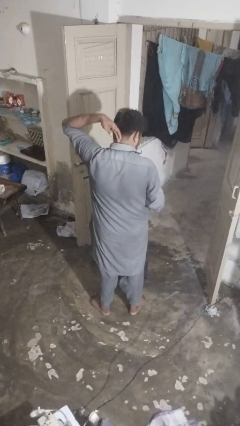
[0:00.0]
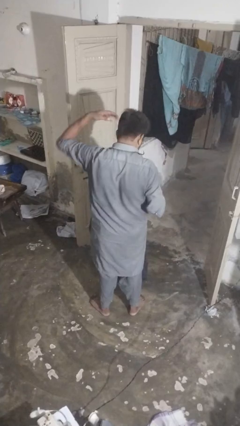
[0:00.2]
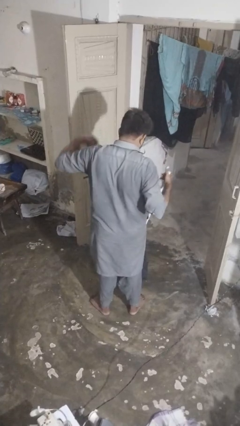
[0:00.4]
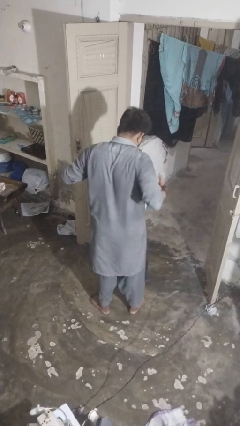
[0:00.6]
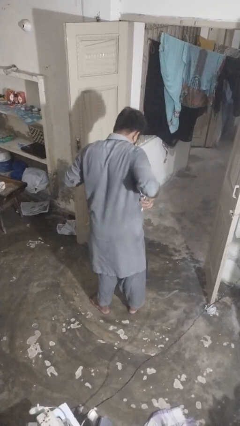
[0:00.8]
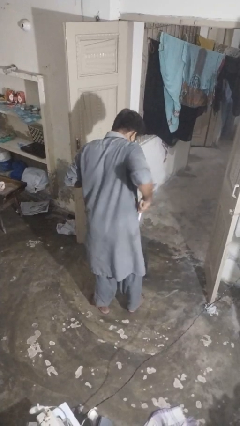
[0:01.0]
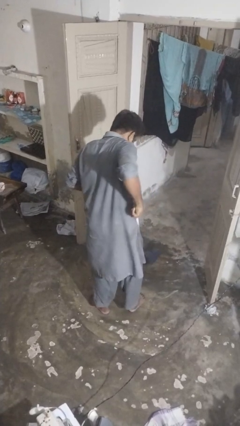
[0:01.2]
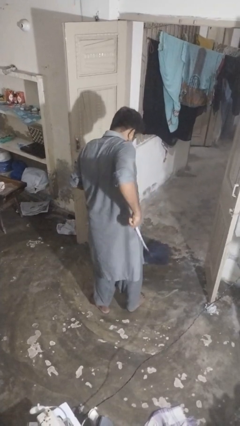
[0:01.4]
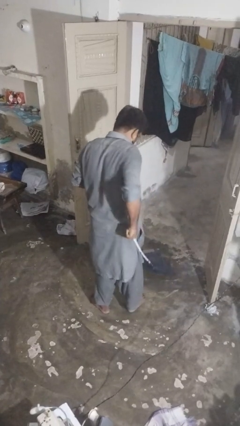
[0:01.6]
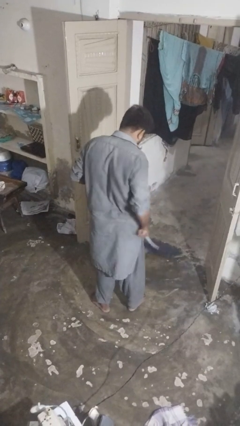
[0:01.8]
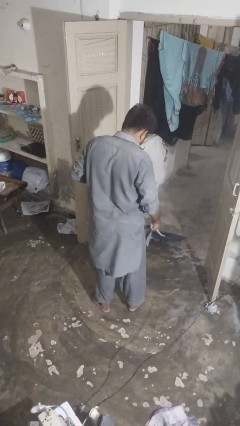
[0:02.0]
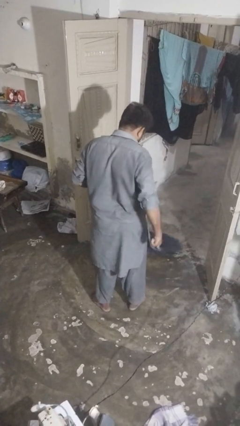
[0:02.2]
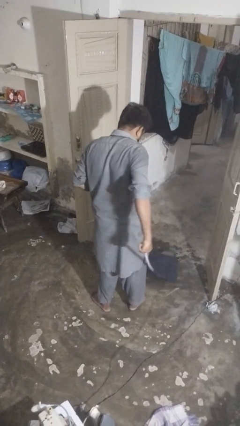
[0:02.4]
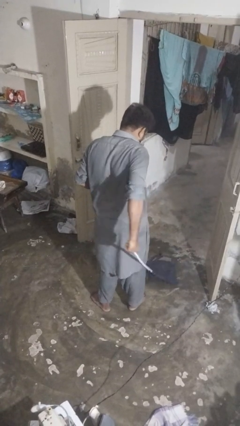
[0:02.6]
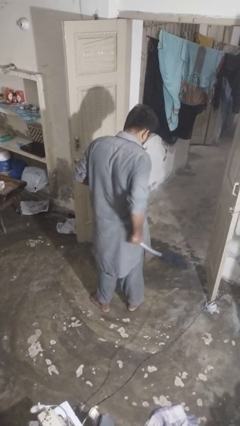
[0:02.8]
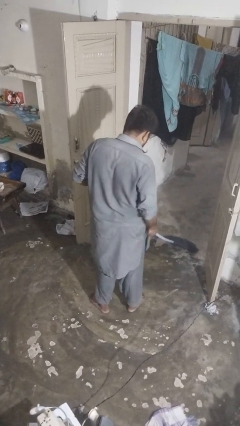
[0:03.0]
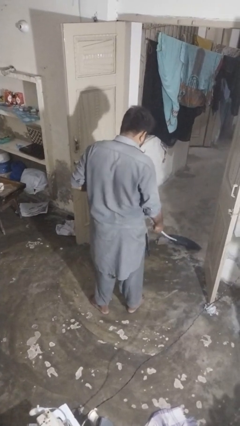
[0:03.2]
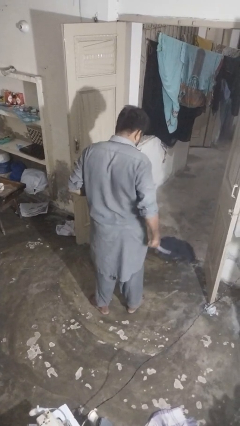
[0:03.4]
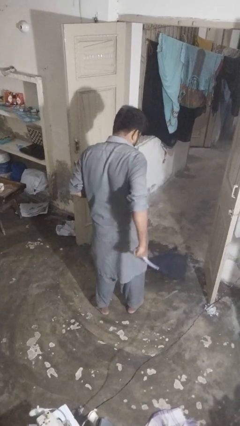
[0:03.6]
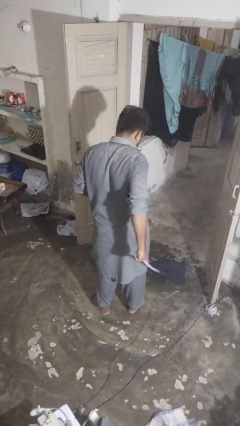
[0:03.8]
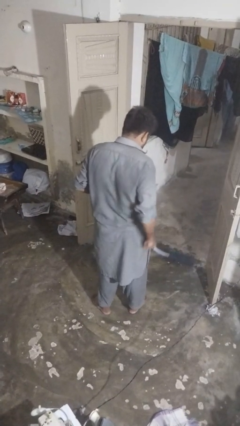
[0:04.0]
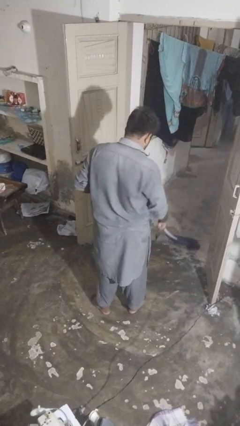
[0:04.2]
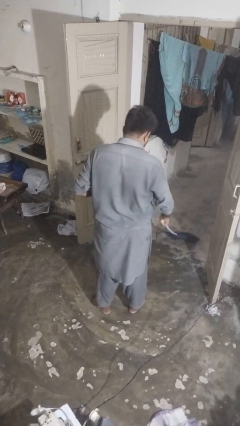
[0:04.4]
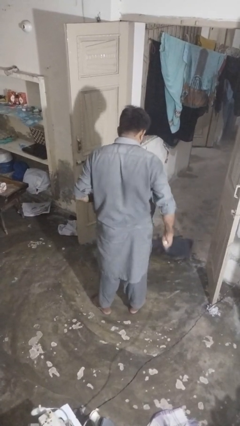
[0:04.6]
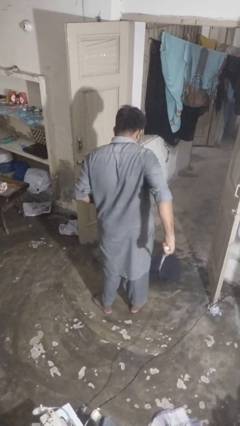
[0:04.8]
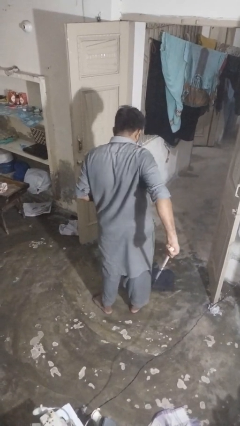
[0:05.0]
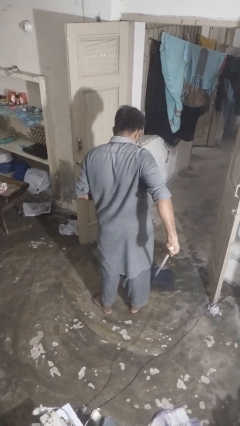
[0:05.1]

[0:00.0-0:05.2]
person mops

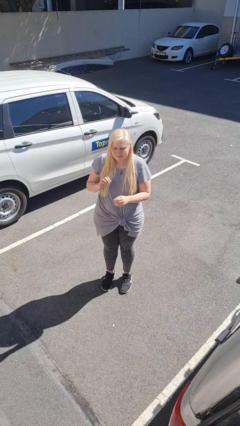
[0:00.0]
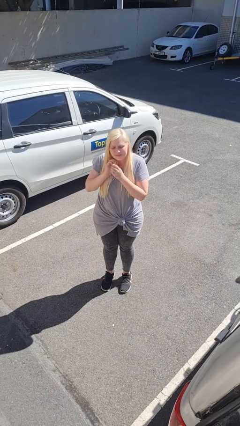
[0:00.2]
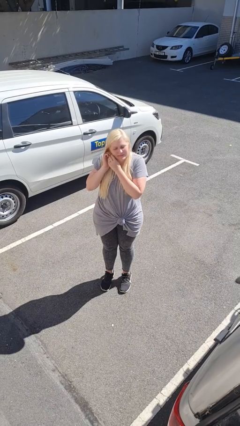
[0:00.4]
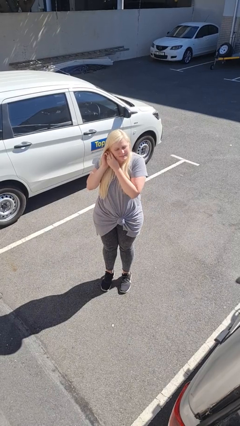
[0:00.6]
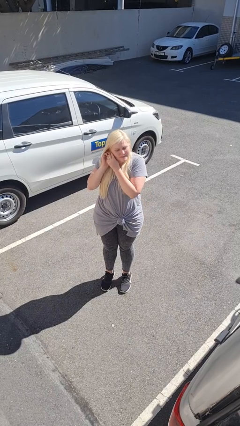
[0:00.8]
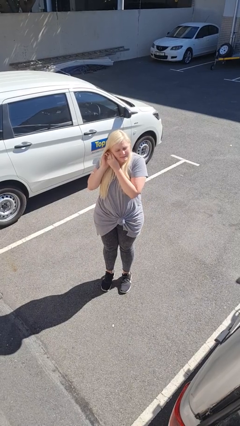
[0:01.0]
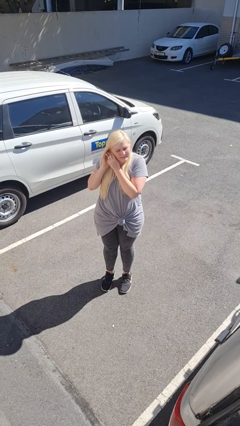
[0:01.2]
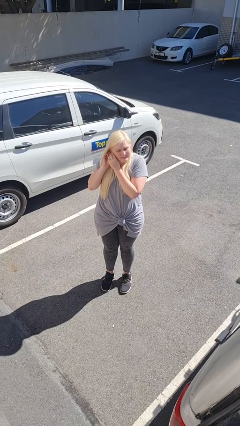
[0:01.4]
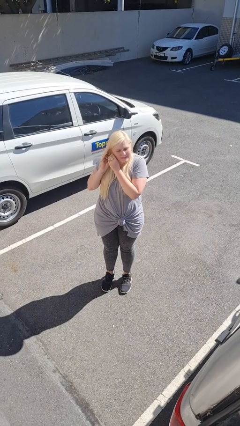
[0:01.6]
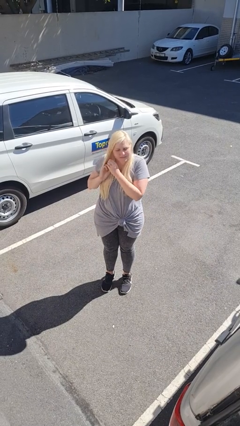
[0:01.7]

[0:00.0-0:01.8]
person takes off earrings

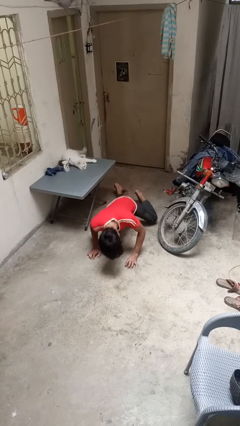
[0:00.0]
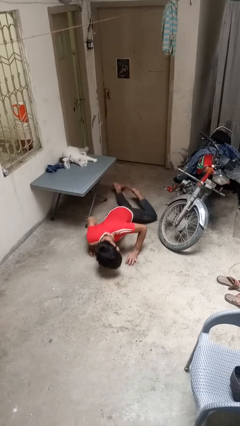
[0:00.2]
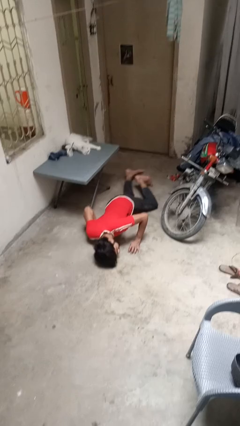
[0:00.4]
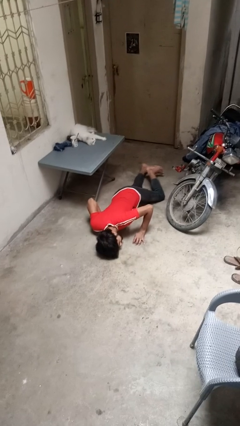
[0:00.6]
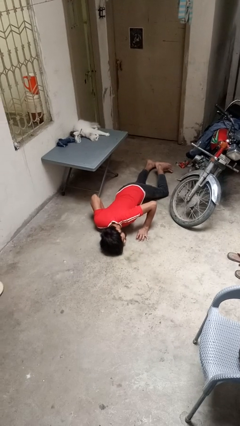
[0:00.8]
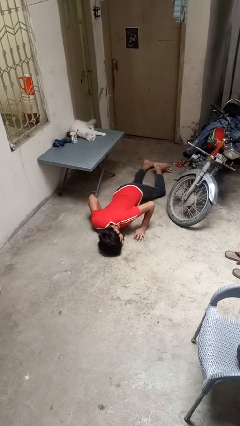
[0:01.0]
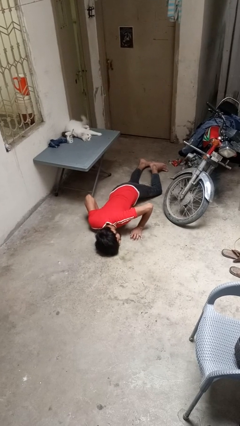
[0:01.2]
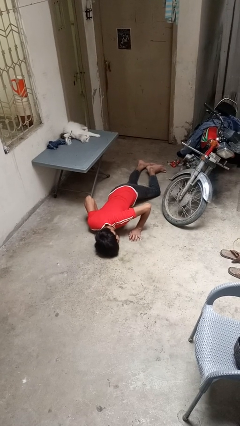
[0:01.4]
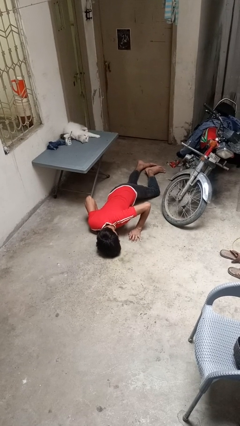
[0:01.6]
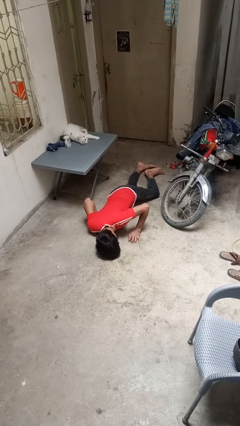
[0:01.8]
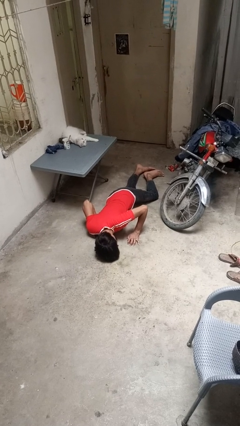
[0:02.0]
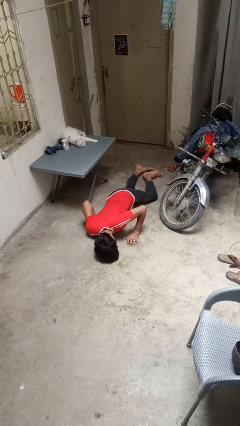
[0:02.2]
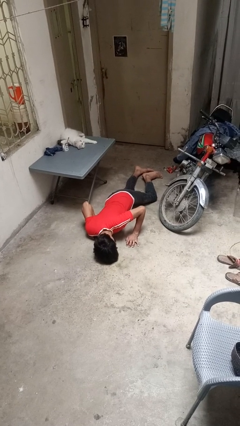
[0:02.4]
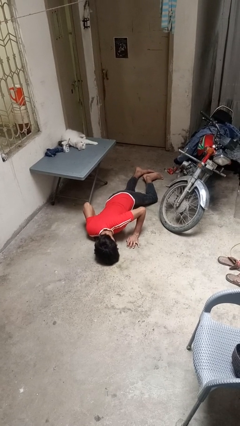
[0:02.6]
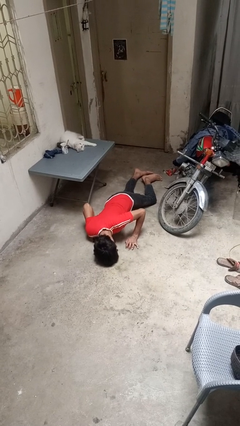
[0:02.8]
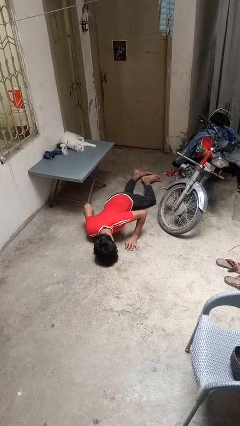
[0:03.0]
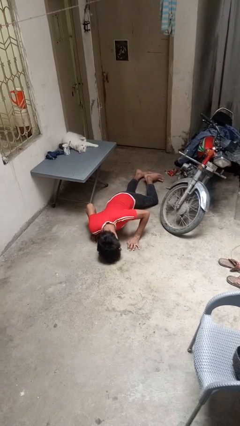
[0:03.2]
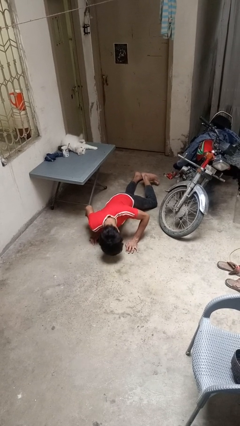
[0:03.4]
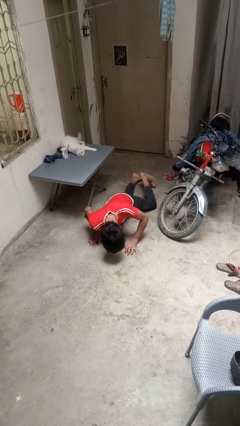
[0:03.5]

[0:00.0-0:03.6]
person lies down on floor

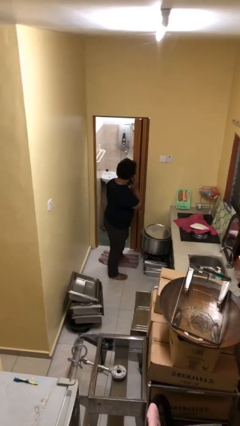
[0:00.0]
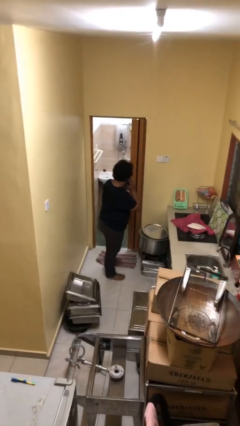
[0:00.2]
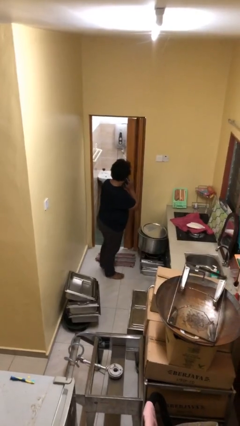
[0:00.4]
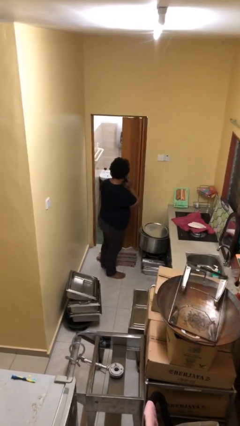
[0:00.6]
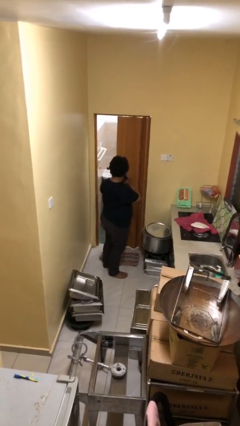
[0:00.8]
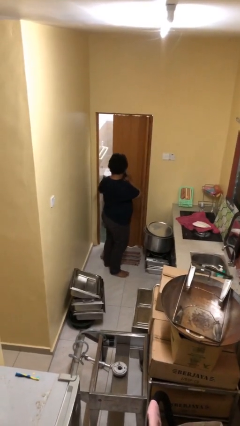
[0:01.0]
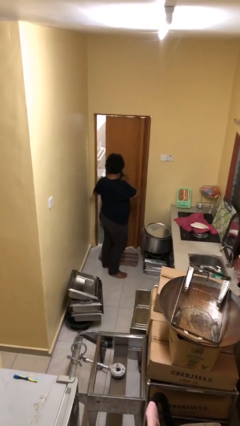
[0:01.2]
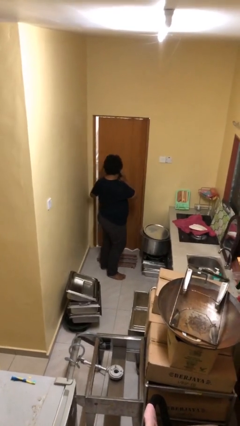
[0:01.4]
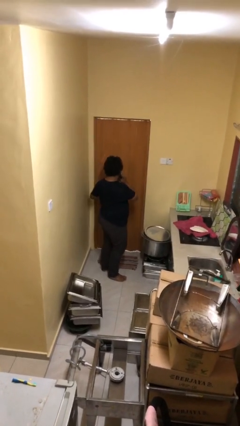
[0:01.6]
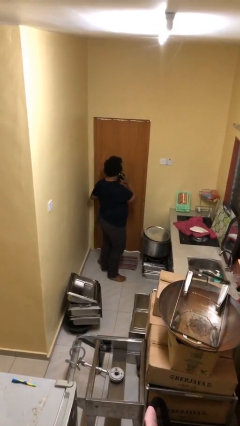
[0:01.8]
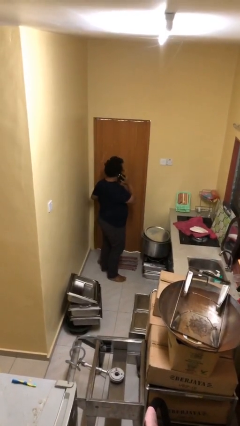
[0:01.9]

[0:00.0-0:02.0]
person closes facility door

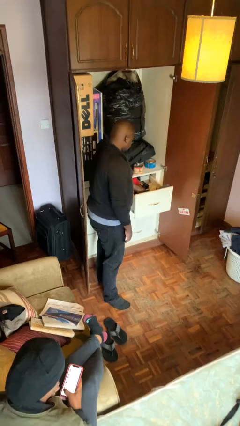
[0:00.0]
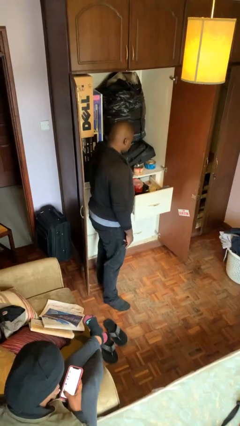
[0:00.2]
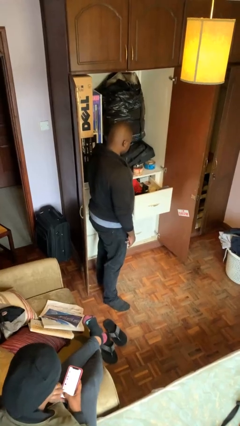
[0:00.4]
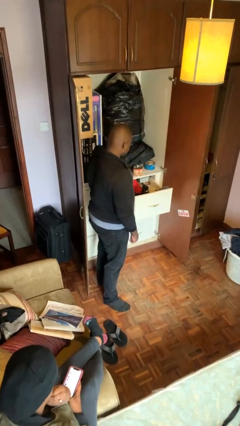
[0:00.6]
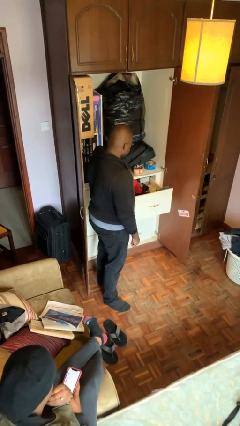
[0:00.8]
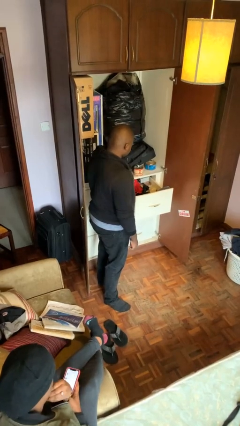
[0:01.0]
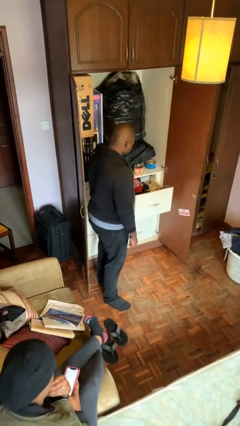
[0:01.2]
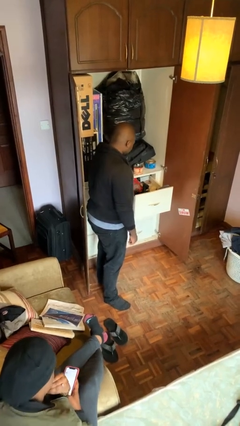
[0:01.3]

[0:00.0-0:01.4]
person puts clothes into dresser

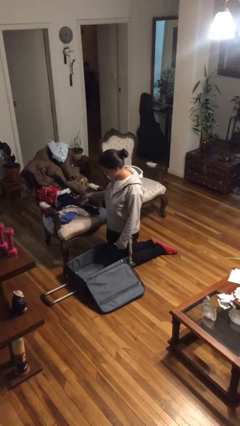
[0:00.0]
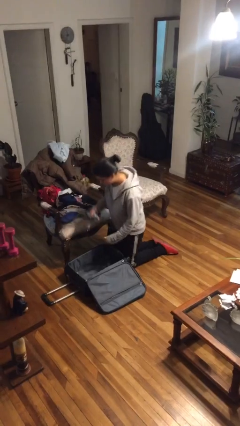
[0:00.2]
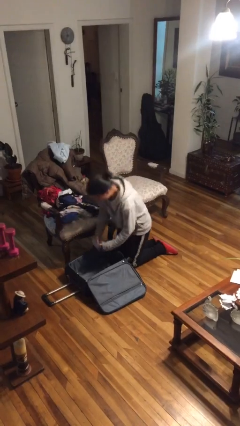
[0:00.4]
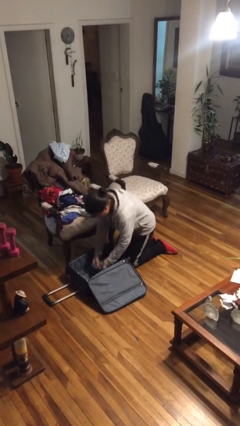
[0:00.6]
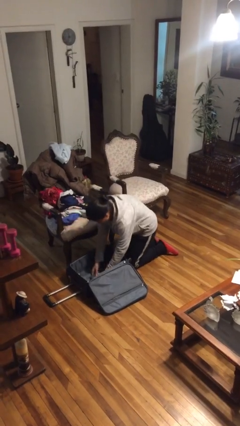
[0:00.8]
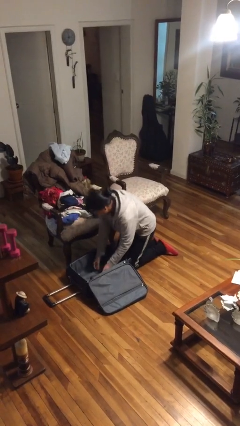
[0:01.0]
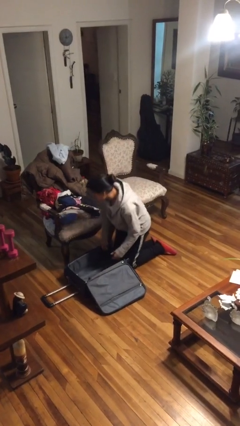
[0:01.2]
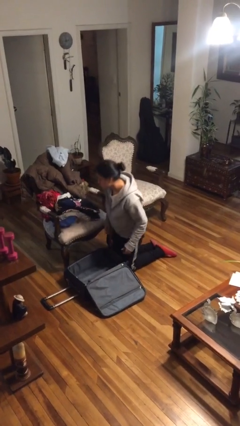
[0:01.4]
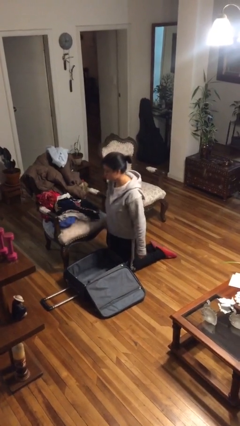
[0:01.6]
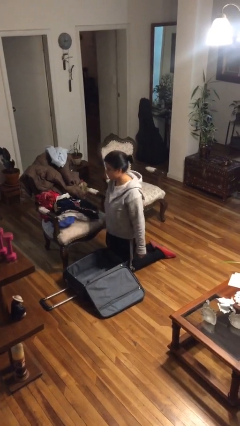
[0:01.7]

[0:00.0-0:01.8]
person loads clothes into suitcase

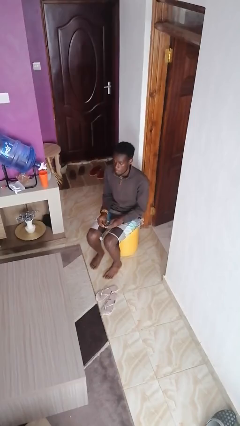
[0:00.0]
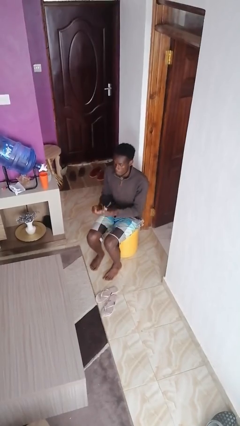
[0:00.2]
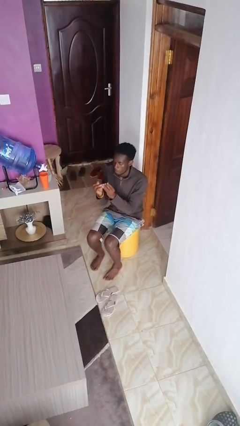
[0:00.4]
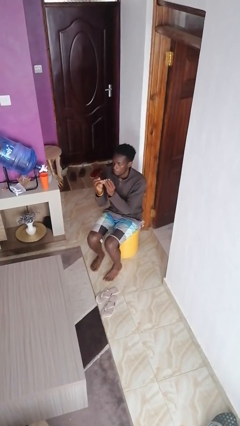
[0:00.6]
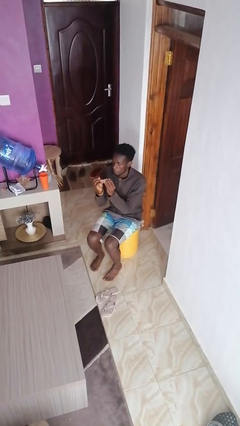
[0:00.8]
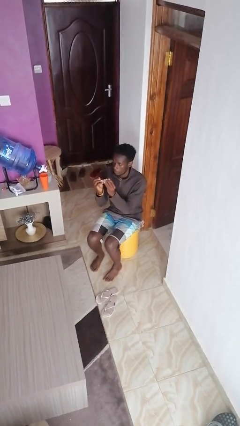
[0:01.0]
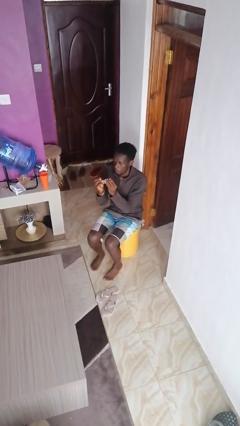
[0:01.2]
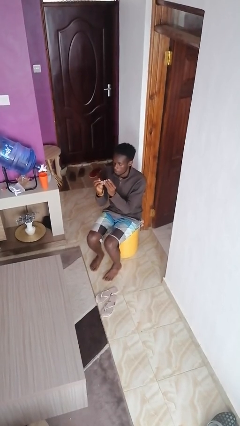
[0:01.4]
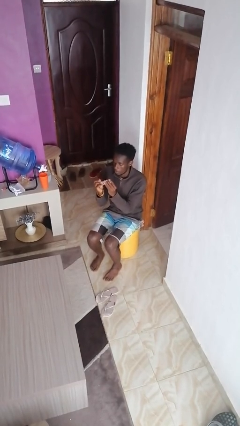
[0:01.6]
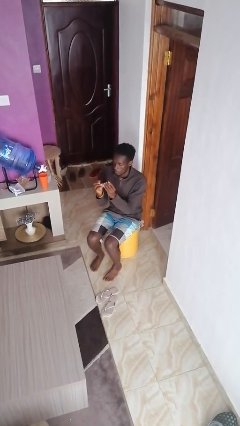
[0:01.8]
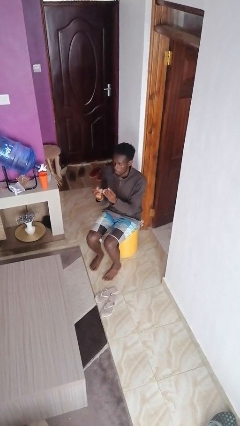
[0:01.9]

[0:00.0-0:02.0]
person clips fingernails
